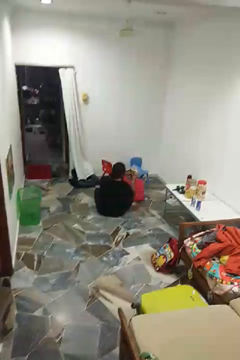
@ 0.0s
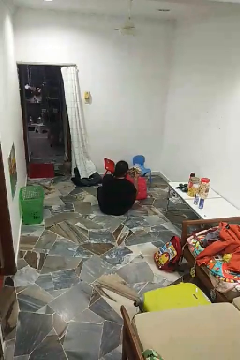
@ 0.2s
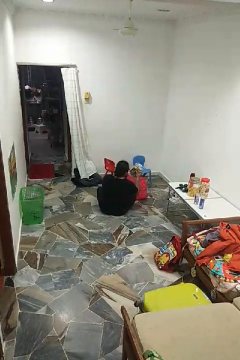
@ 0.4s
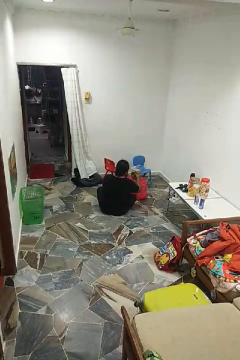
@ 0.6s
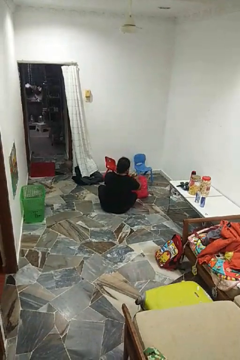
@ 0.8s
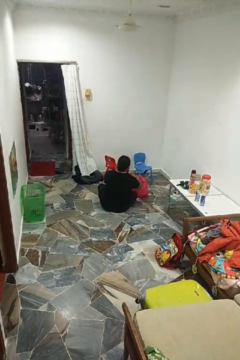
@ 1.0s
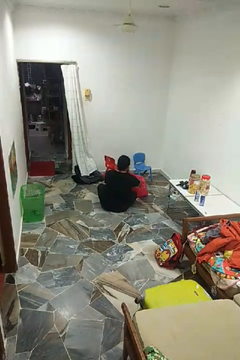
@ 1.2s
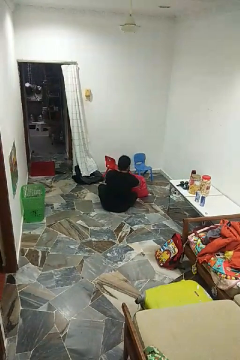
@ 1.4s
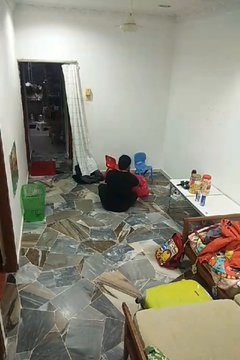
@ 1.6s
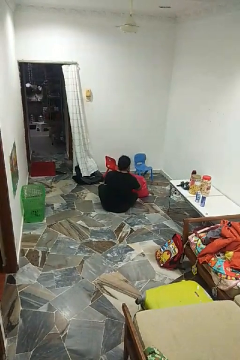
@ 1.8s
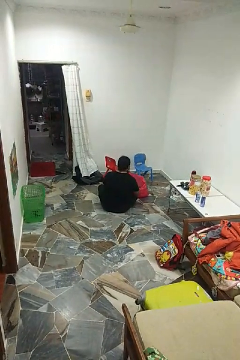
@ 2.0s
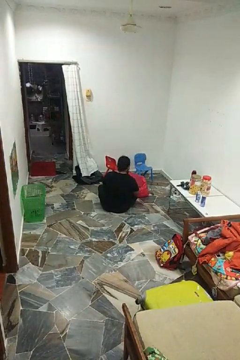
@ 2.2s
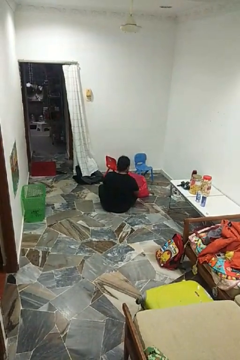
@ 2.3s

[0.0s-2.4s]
person puts object into bag

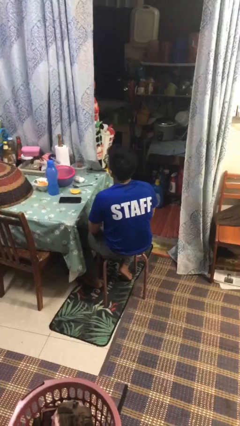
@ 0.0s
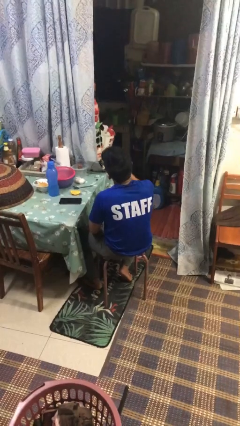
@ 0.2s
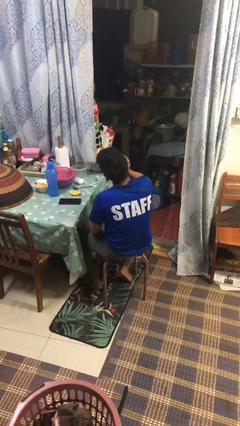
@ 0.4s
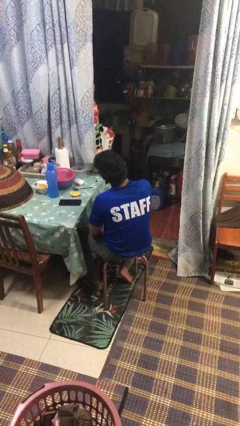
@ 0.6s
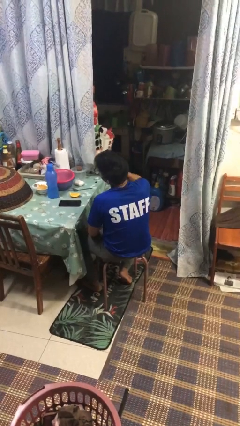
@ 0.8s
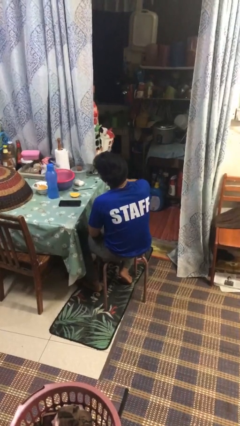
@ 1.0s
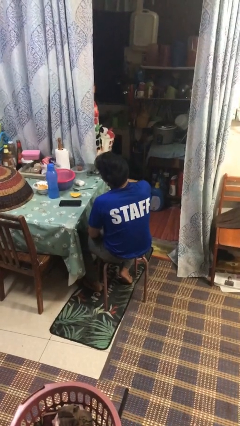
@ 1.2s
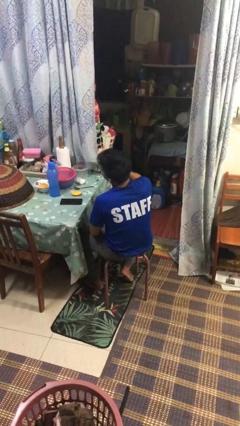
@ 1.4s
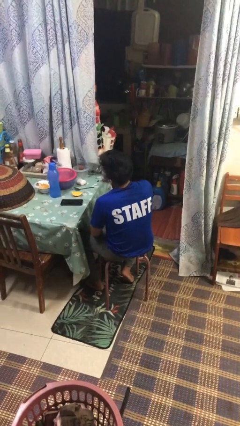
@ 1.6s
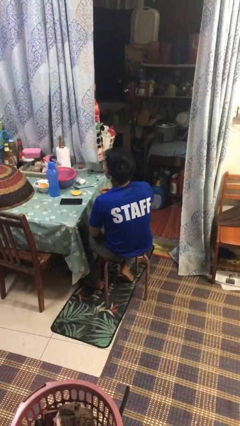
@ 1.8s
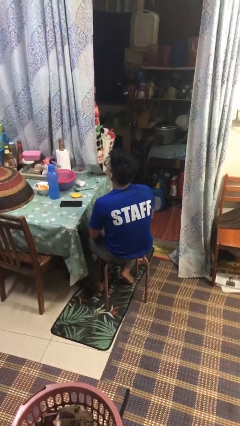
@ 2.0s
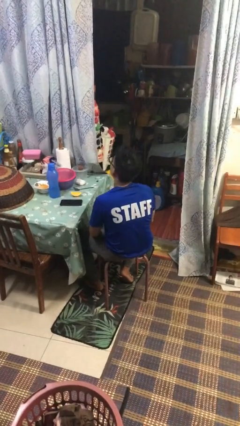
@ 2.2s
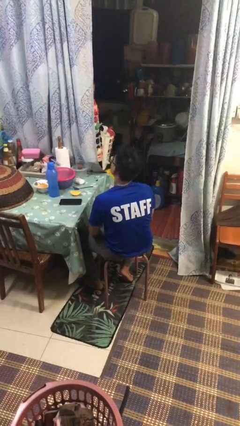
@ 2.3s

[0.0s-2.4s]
person scratches face

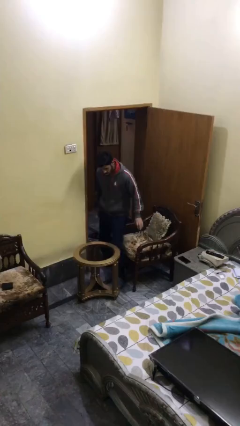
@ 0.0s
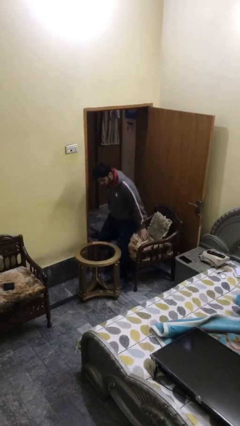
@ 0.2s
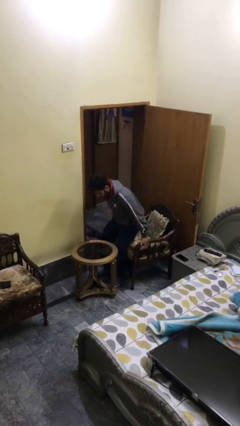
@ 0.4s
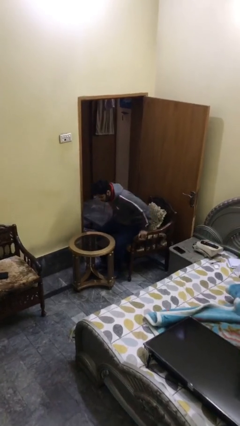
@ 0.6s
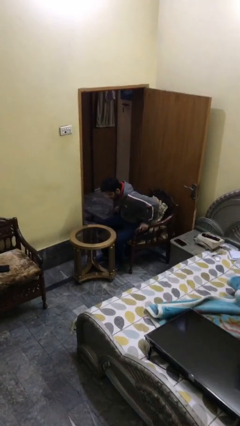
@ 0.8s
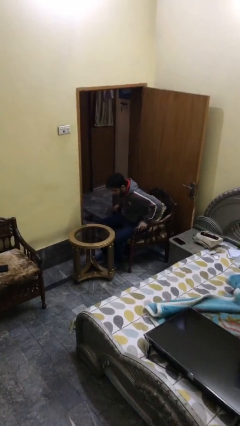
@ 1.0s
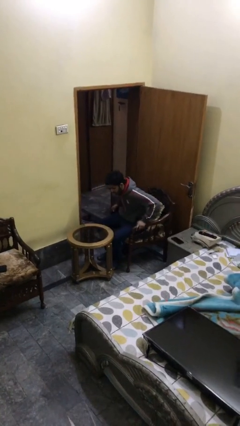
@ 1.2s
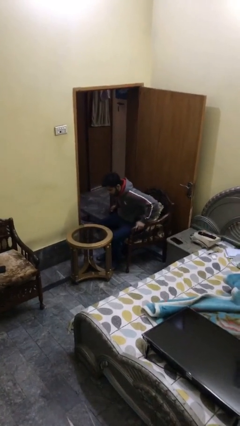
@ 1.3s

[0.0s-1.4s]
person sits down

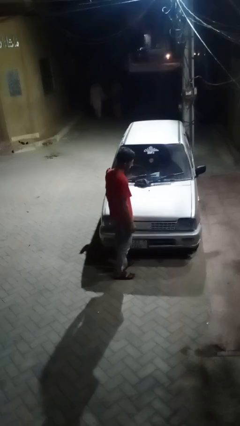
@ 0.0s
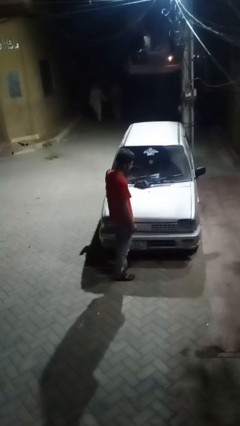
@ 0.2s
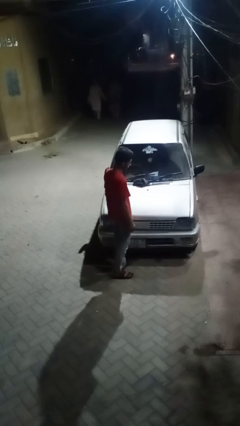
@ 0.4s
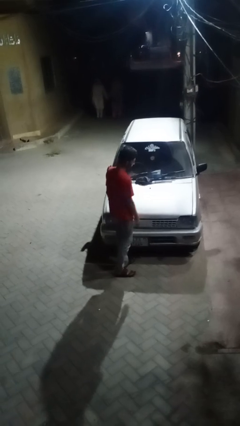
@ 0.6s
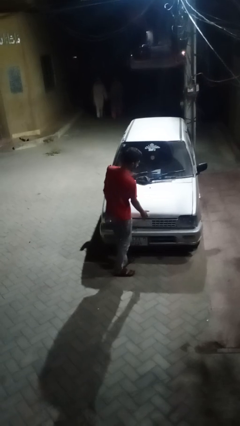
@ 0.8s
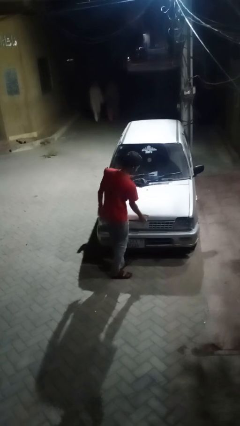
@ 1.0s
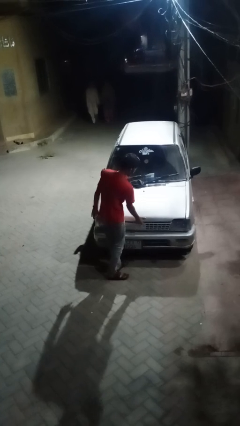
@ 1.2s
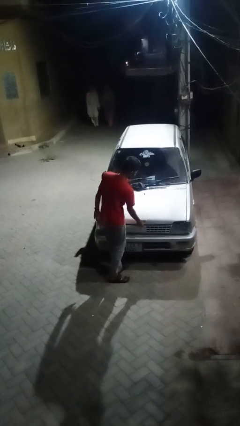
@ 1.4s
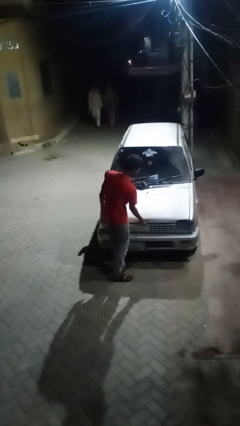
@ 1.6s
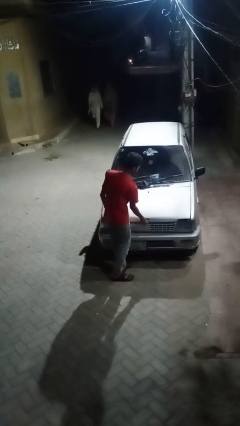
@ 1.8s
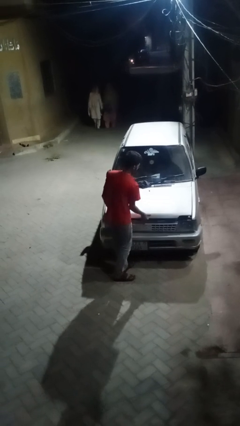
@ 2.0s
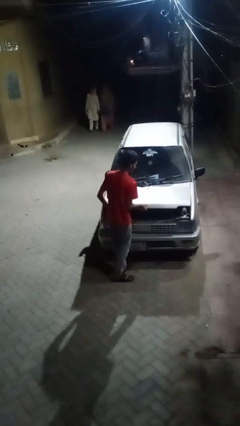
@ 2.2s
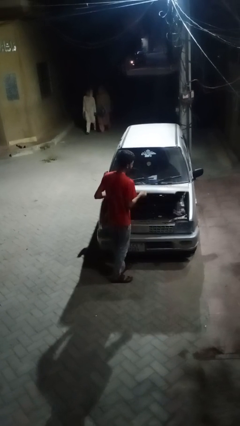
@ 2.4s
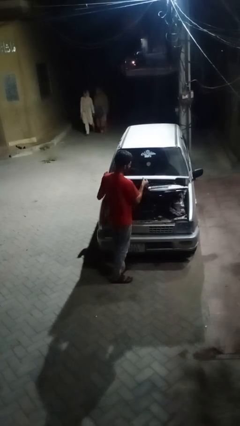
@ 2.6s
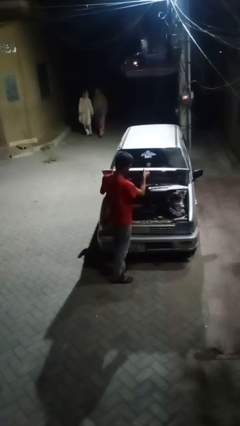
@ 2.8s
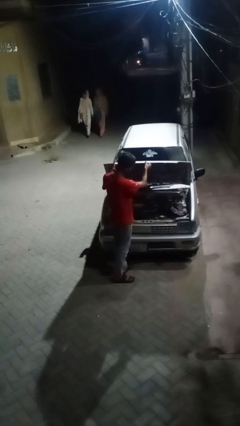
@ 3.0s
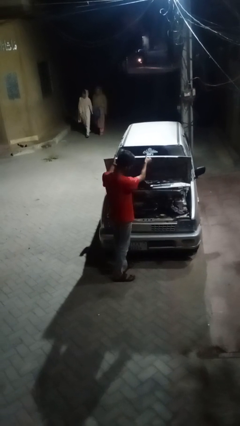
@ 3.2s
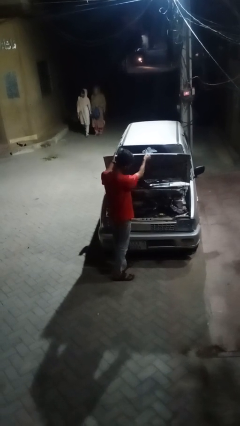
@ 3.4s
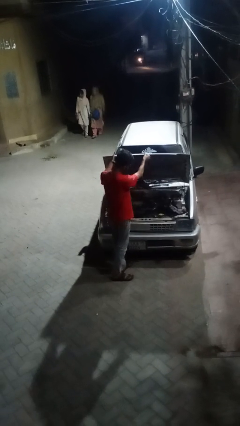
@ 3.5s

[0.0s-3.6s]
person opens car hood

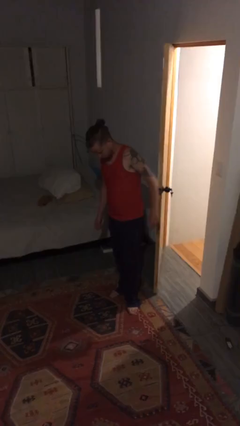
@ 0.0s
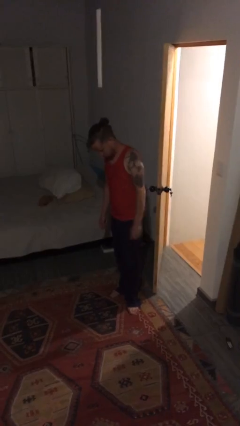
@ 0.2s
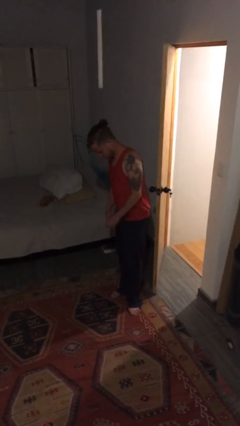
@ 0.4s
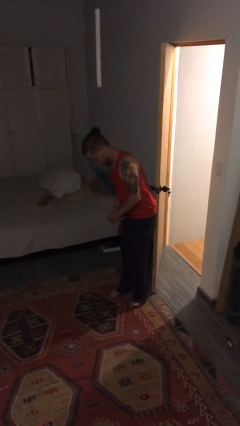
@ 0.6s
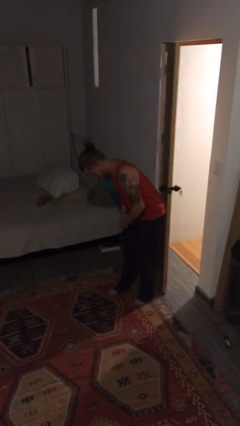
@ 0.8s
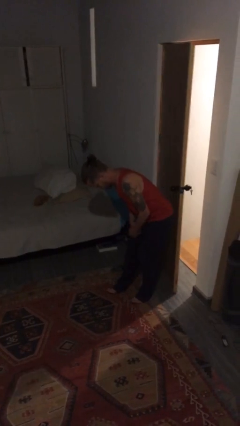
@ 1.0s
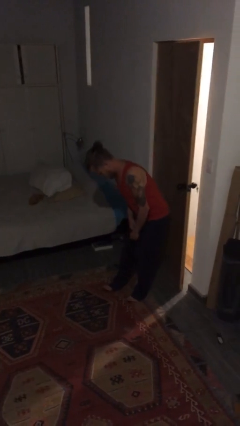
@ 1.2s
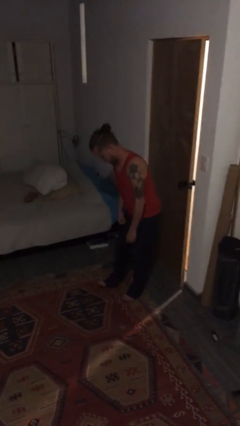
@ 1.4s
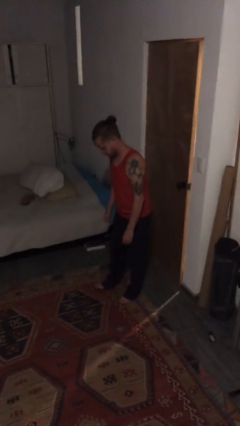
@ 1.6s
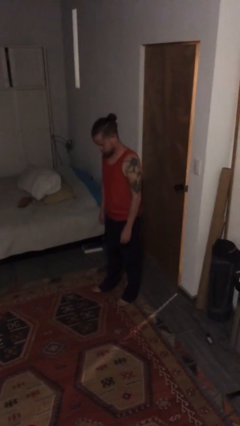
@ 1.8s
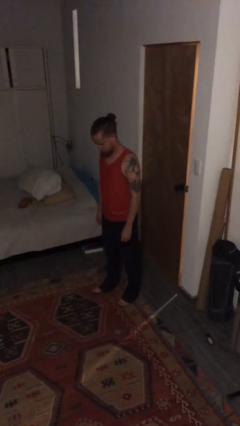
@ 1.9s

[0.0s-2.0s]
person closes door with hip

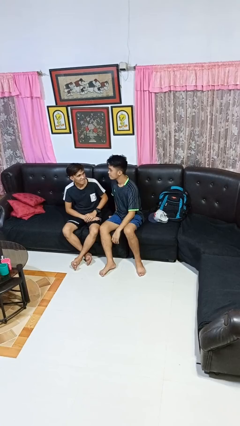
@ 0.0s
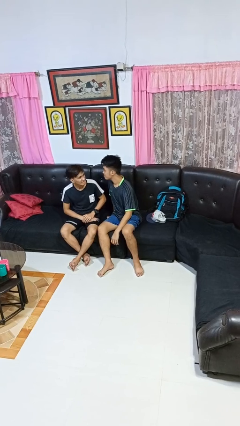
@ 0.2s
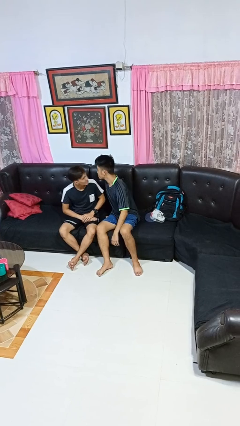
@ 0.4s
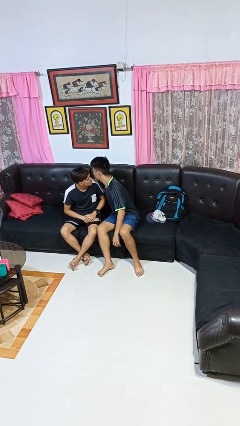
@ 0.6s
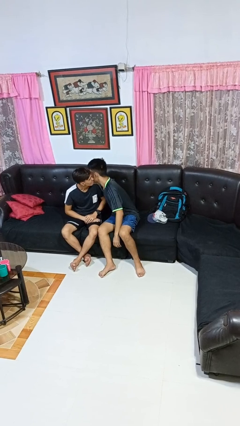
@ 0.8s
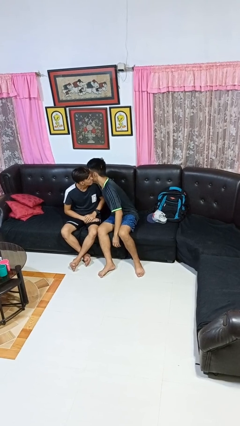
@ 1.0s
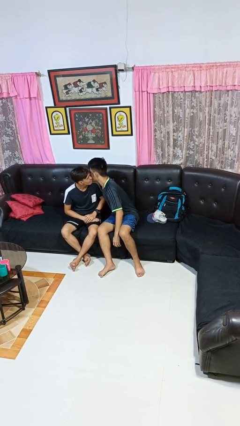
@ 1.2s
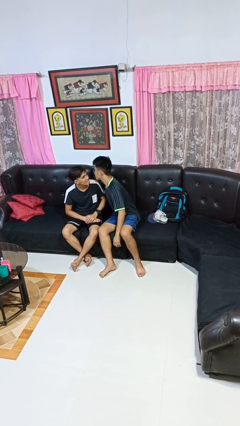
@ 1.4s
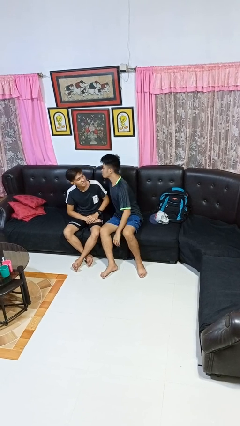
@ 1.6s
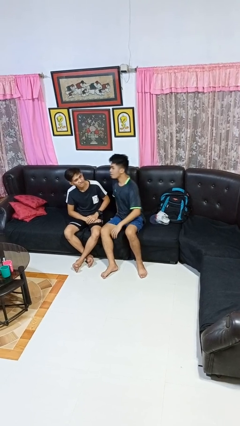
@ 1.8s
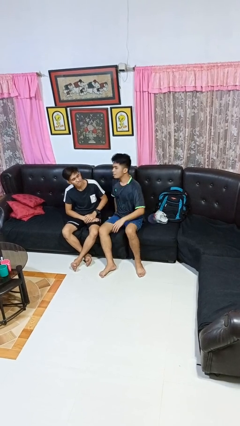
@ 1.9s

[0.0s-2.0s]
person kisses cheek of person

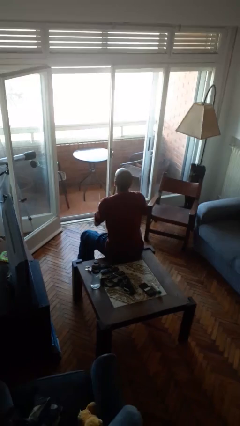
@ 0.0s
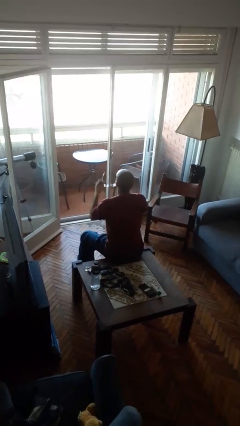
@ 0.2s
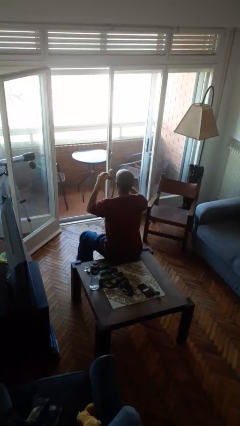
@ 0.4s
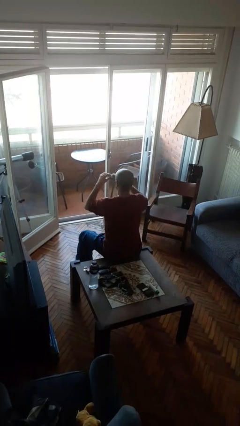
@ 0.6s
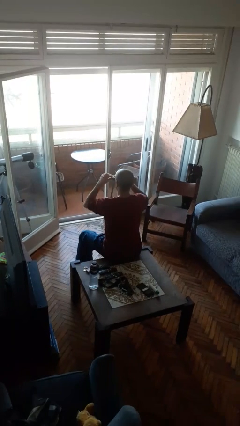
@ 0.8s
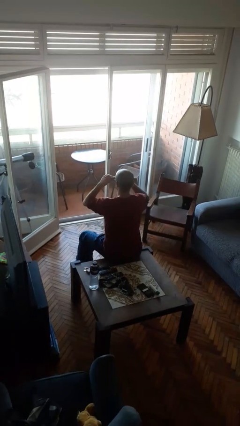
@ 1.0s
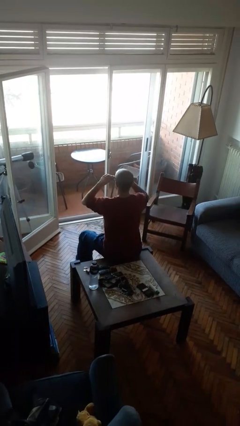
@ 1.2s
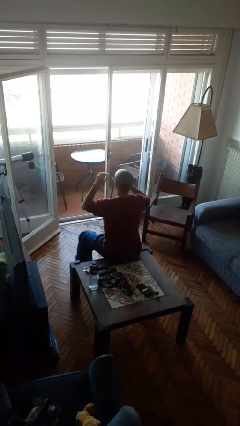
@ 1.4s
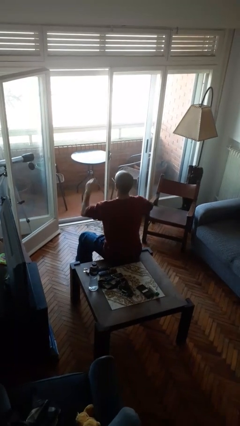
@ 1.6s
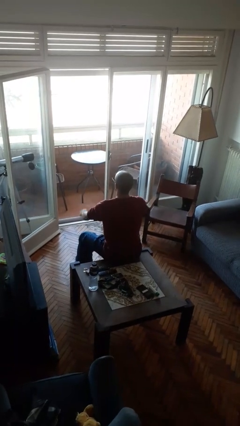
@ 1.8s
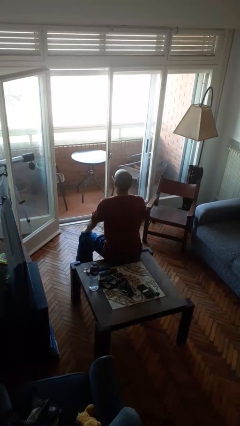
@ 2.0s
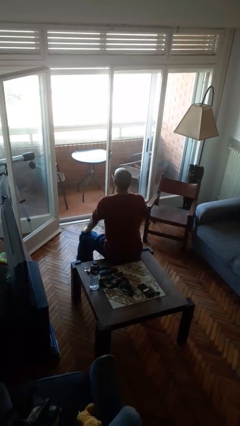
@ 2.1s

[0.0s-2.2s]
person puts on sunglasses

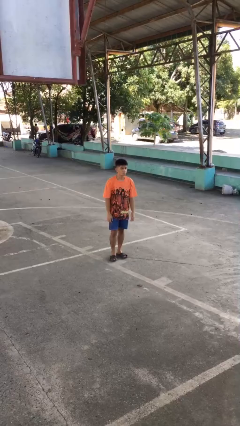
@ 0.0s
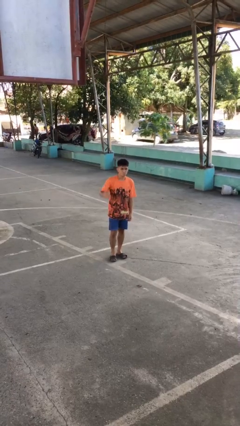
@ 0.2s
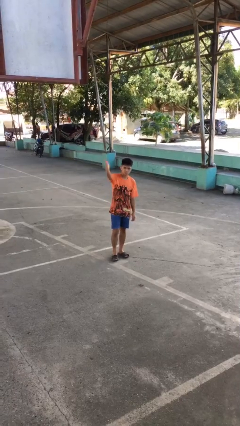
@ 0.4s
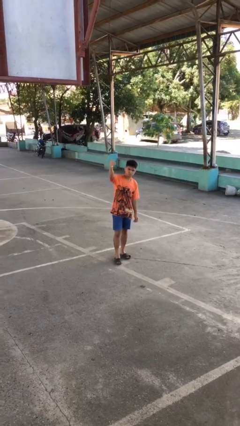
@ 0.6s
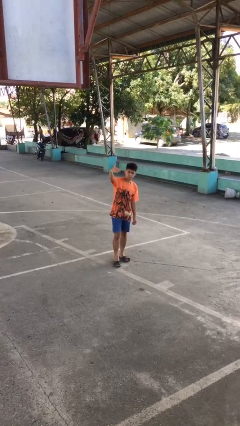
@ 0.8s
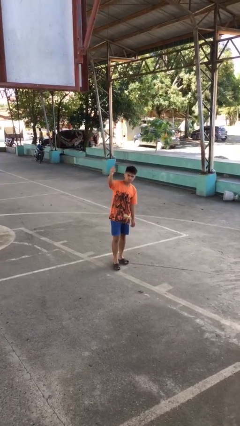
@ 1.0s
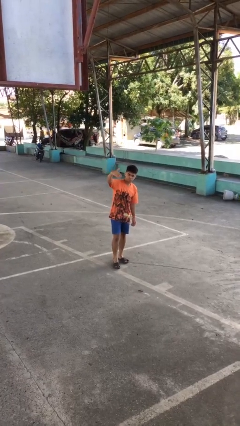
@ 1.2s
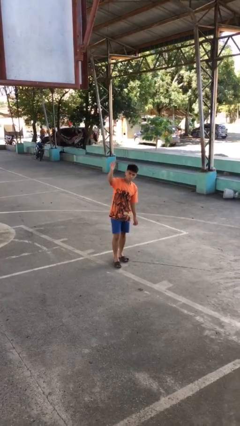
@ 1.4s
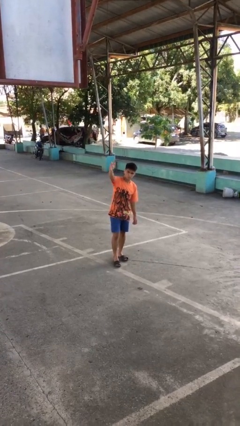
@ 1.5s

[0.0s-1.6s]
person gestures come here

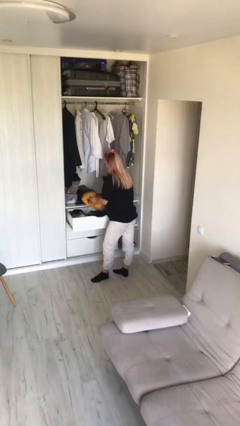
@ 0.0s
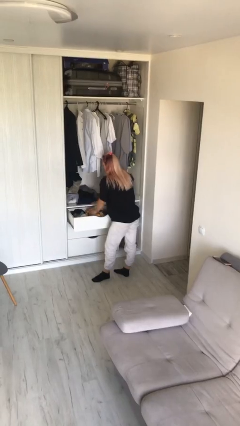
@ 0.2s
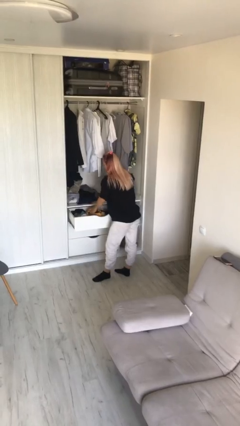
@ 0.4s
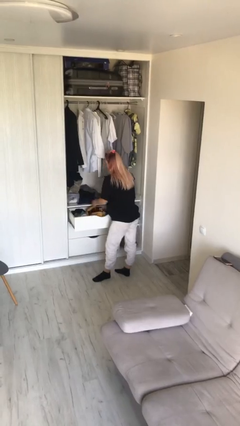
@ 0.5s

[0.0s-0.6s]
person puts clothes into dresser
